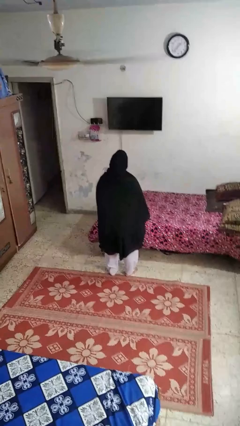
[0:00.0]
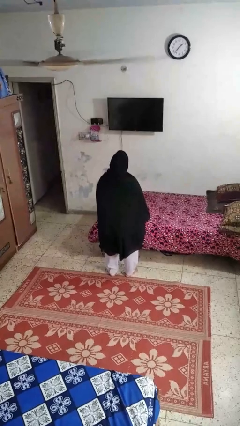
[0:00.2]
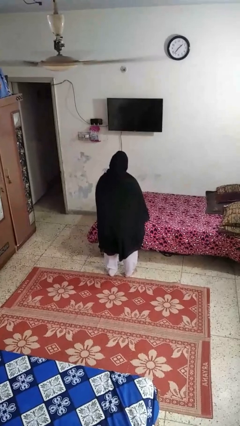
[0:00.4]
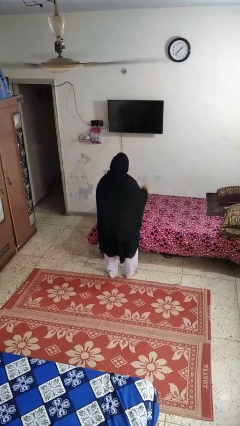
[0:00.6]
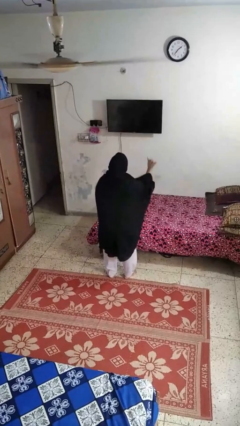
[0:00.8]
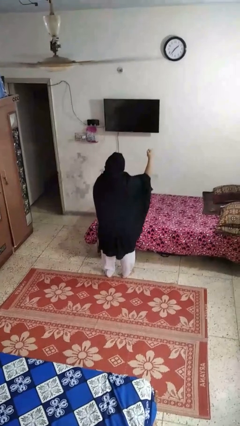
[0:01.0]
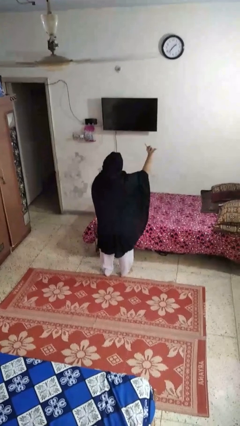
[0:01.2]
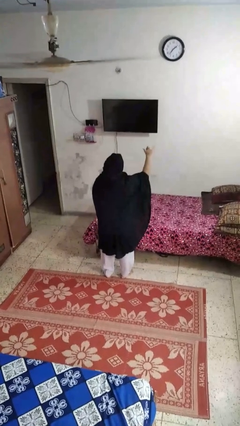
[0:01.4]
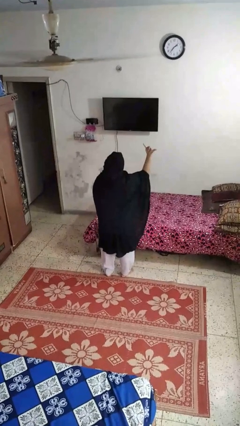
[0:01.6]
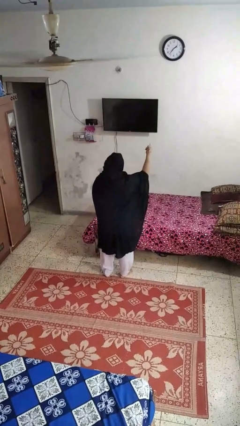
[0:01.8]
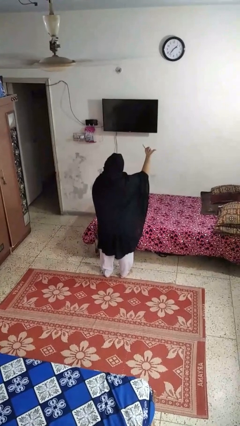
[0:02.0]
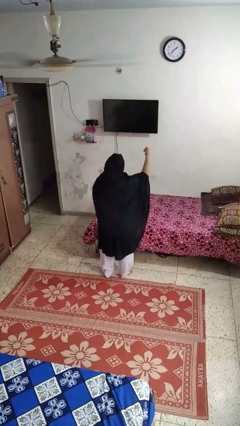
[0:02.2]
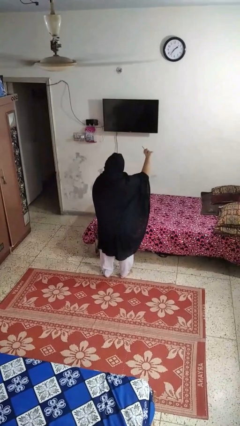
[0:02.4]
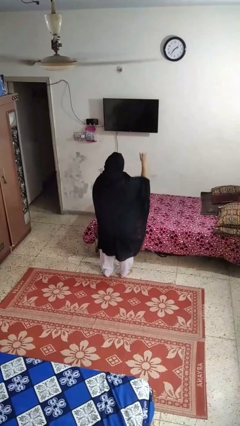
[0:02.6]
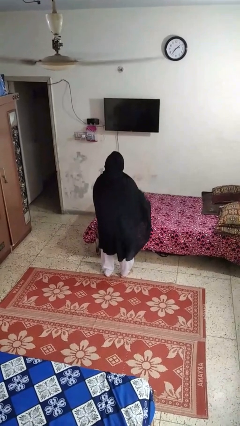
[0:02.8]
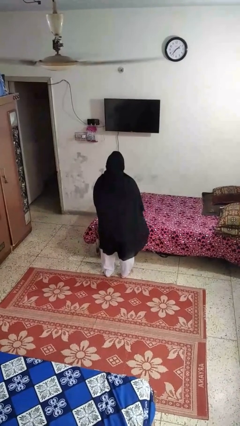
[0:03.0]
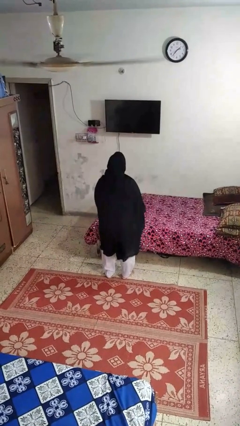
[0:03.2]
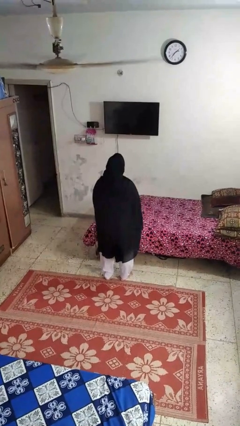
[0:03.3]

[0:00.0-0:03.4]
person gestures hang loose

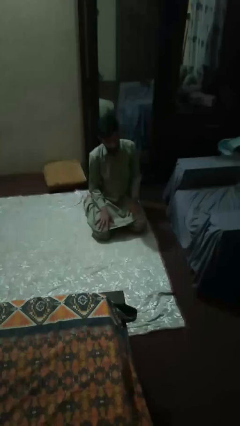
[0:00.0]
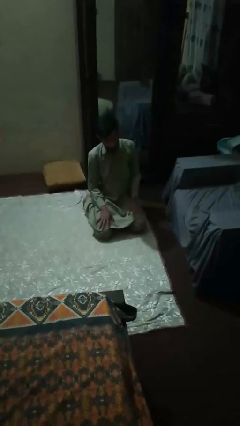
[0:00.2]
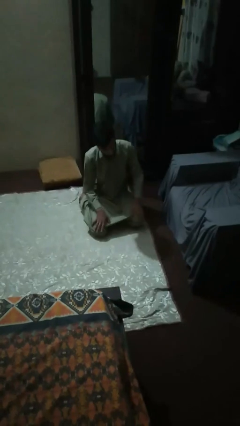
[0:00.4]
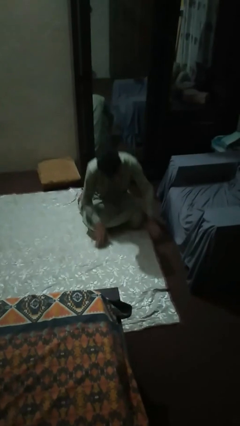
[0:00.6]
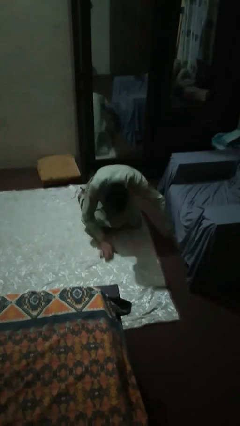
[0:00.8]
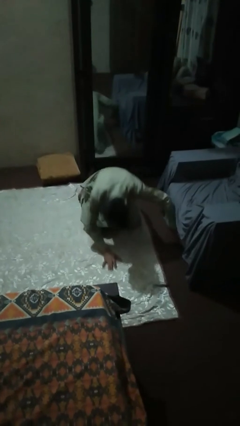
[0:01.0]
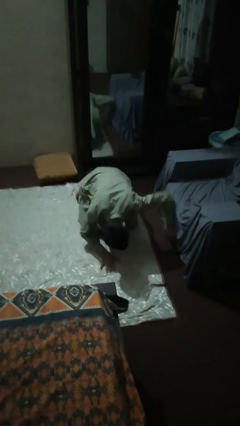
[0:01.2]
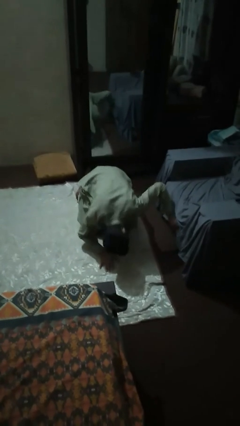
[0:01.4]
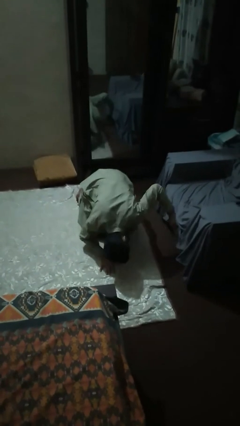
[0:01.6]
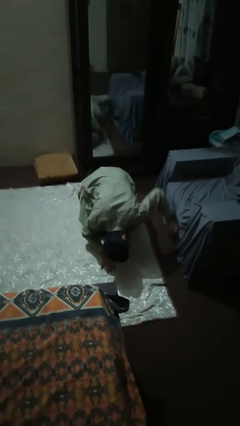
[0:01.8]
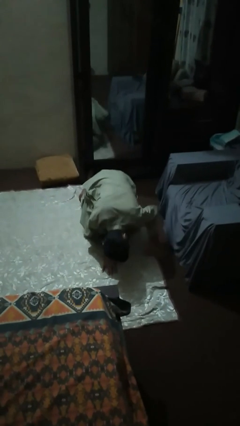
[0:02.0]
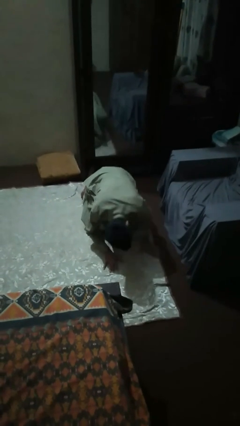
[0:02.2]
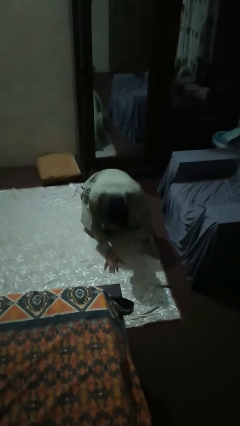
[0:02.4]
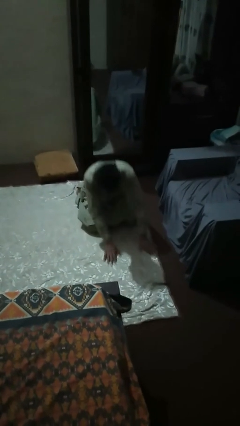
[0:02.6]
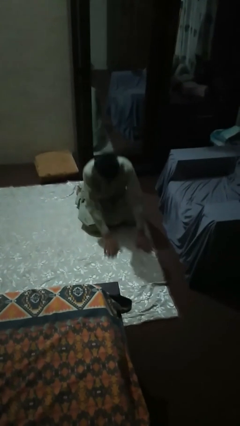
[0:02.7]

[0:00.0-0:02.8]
person searches under couch

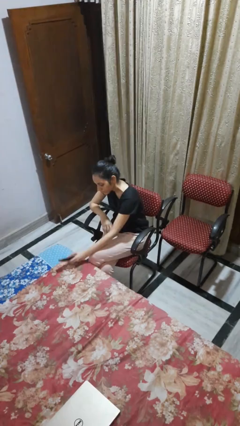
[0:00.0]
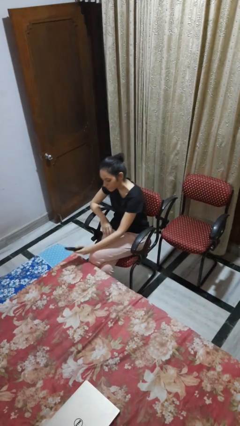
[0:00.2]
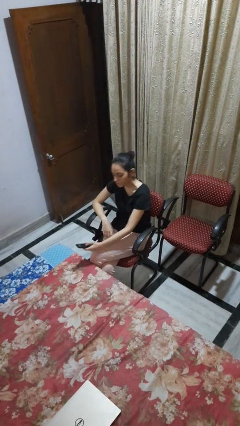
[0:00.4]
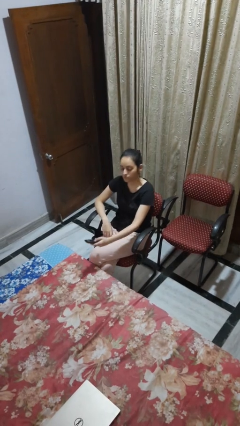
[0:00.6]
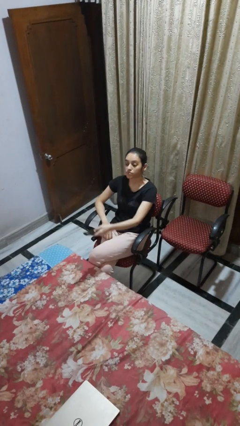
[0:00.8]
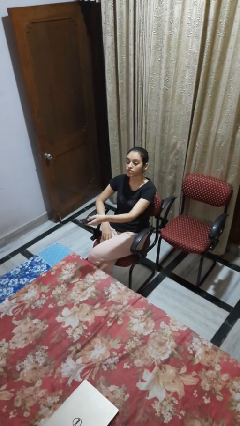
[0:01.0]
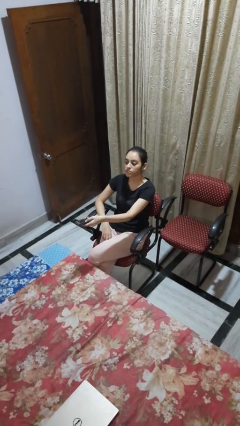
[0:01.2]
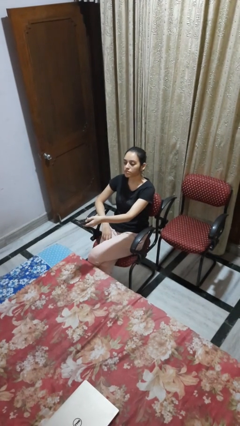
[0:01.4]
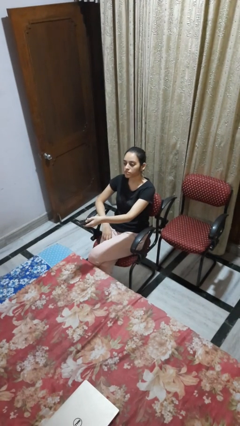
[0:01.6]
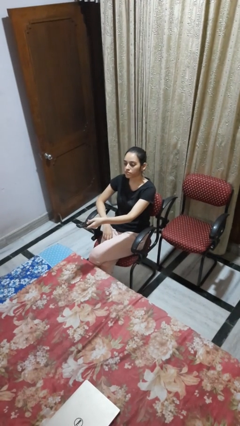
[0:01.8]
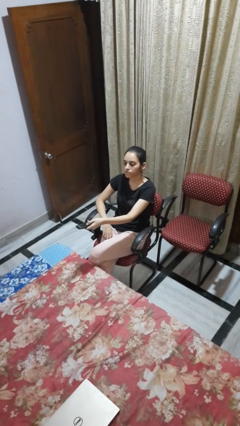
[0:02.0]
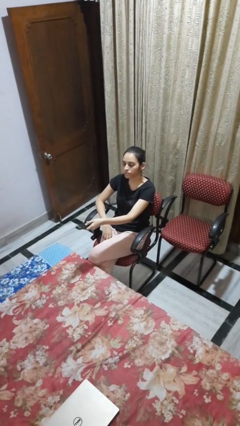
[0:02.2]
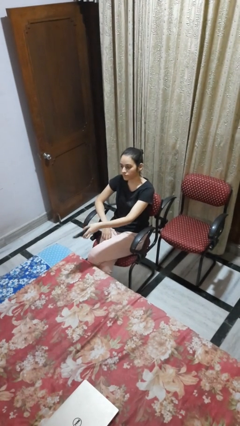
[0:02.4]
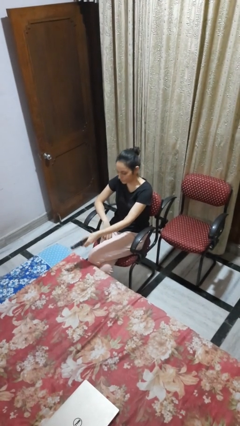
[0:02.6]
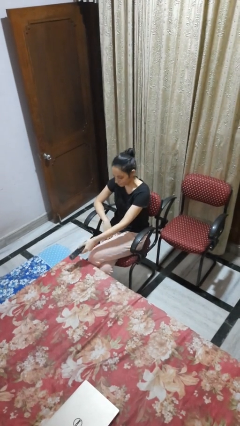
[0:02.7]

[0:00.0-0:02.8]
person uses television remote

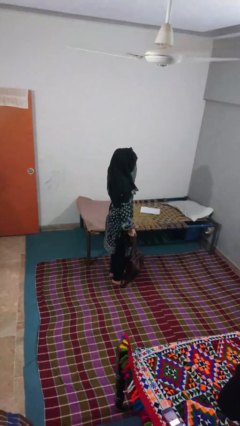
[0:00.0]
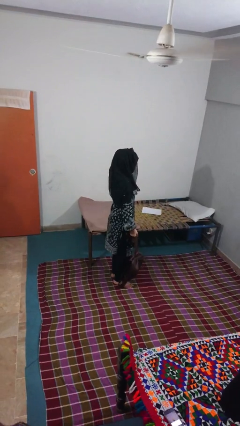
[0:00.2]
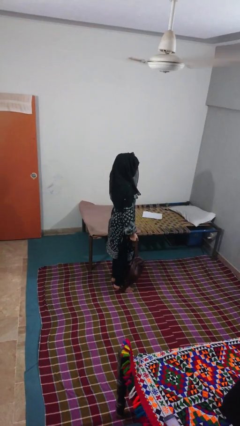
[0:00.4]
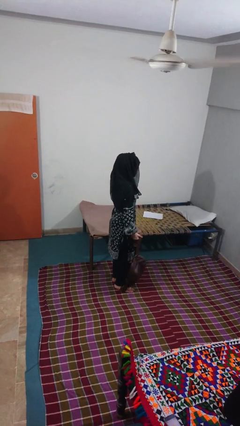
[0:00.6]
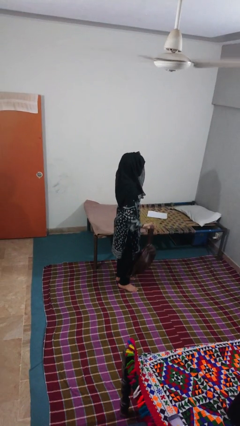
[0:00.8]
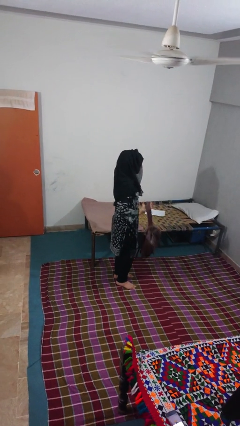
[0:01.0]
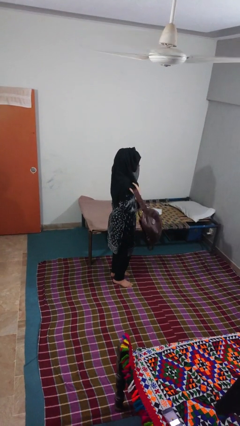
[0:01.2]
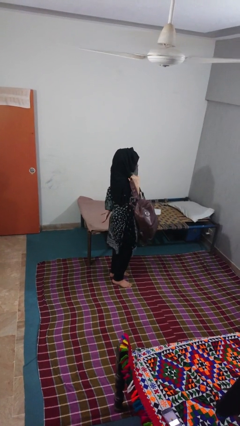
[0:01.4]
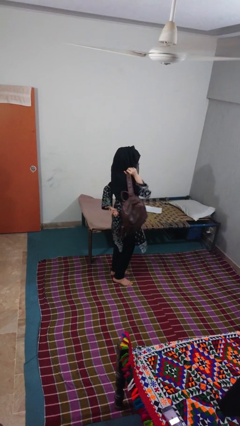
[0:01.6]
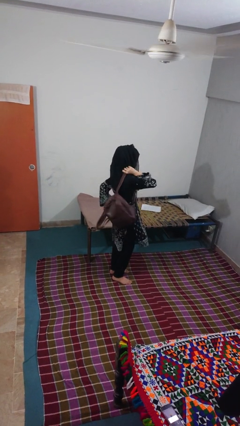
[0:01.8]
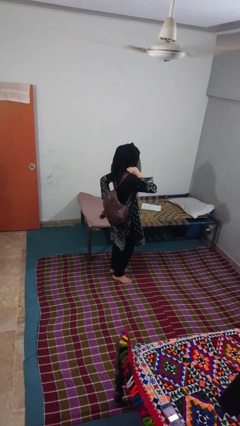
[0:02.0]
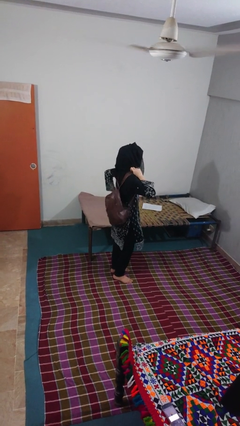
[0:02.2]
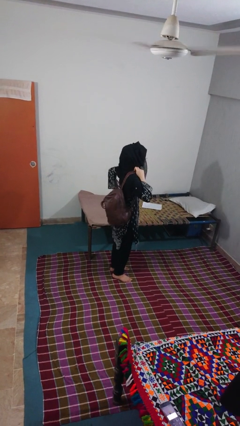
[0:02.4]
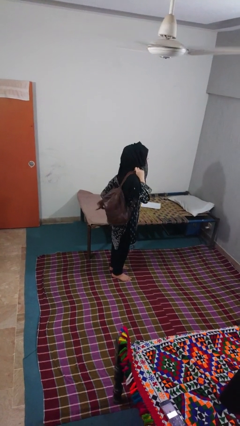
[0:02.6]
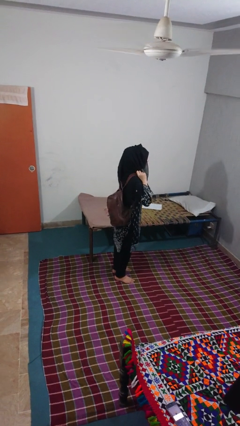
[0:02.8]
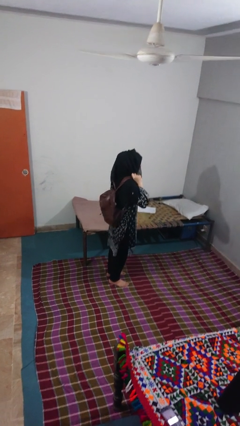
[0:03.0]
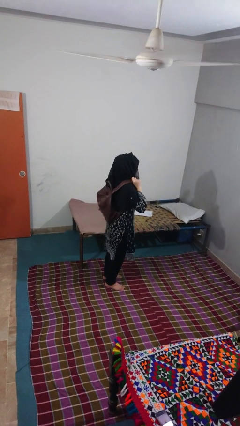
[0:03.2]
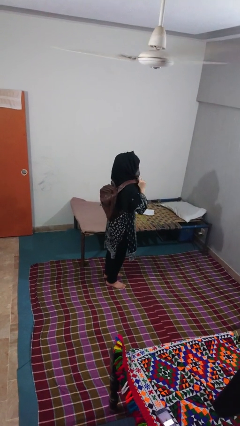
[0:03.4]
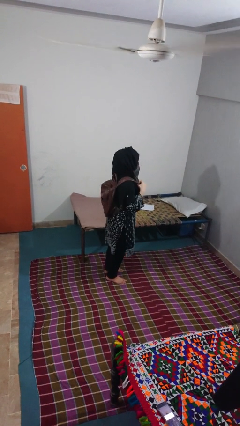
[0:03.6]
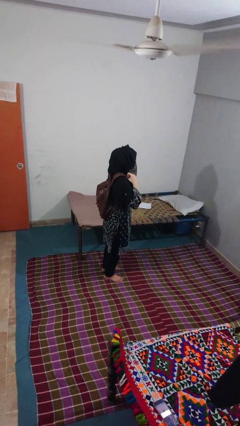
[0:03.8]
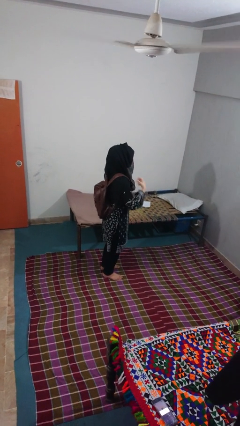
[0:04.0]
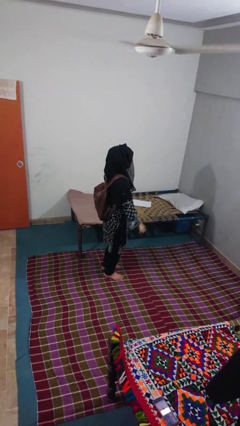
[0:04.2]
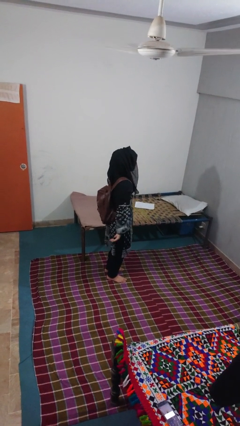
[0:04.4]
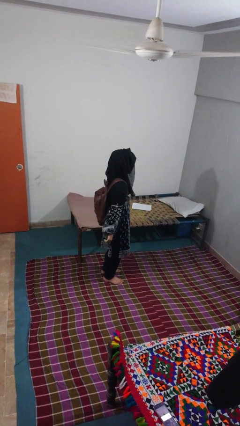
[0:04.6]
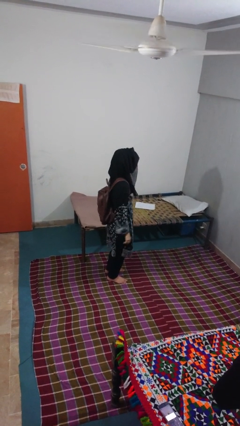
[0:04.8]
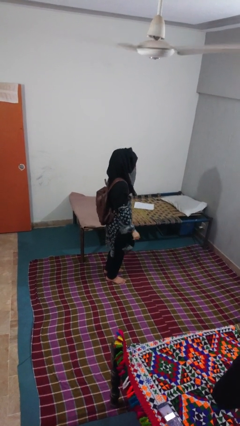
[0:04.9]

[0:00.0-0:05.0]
person puts on backpack

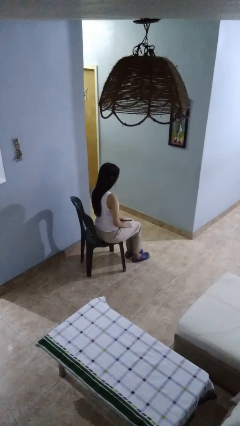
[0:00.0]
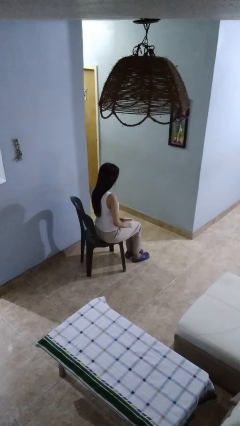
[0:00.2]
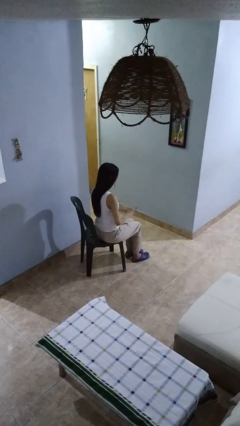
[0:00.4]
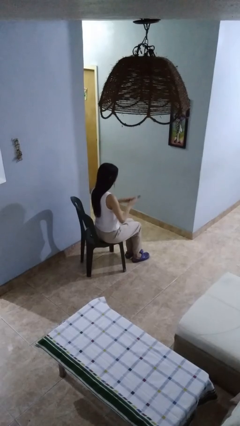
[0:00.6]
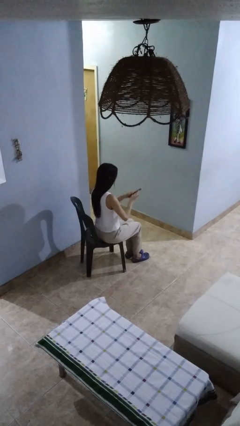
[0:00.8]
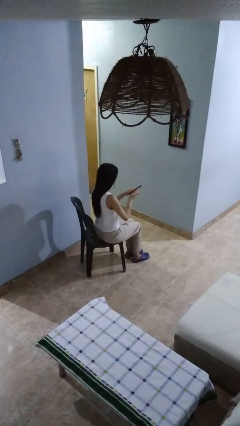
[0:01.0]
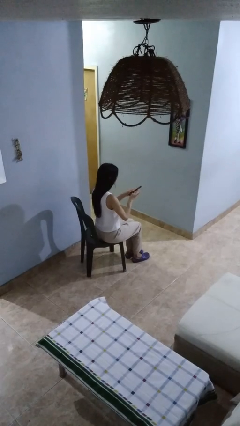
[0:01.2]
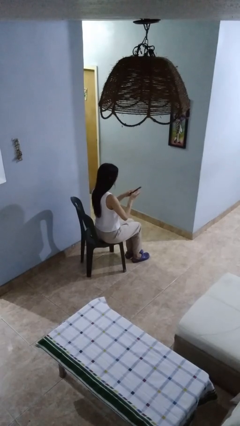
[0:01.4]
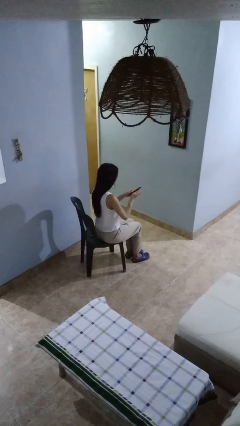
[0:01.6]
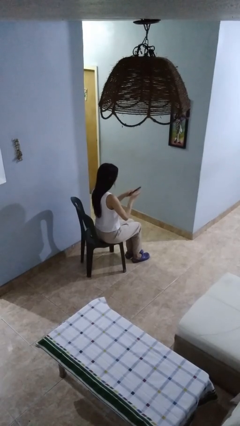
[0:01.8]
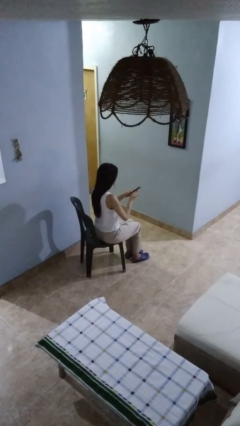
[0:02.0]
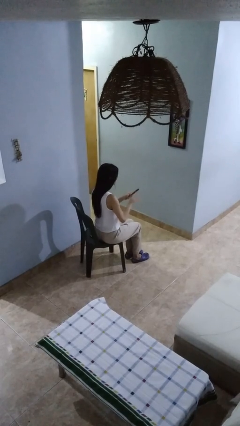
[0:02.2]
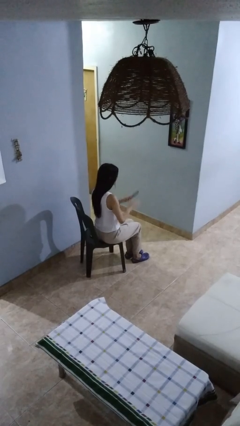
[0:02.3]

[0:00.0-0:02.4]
person files fingernails

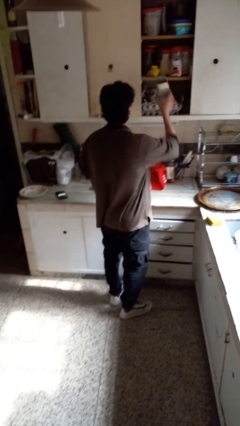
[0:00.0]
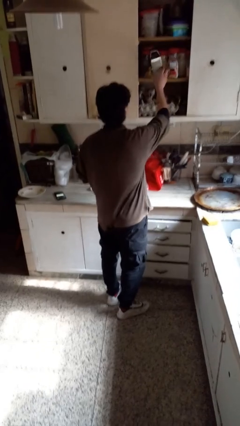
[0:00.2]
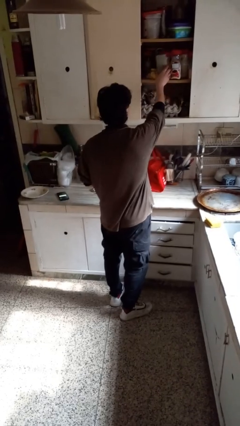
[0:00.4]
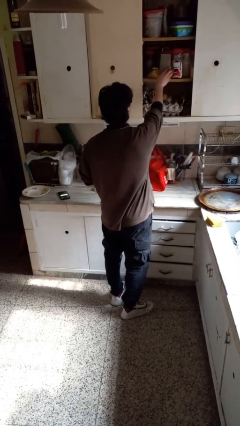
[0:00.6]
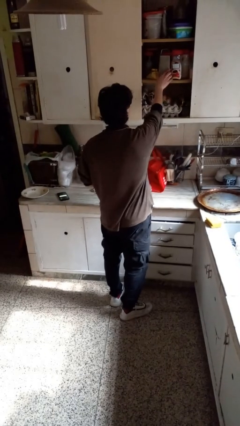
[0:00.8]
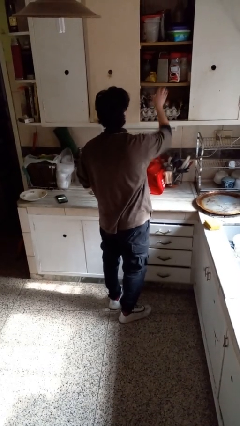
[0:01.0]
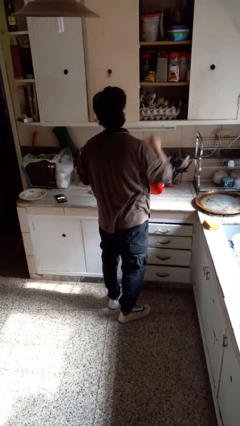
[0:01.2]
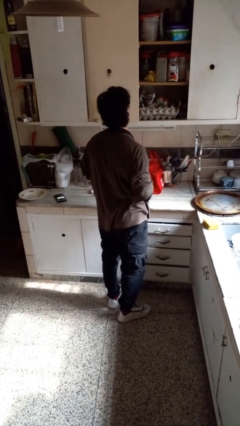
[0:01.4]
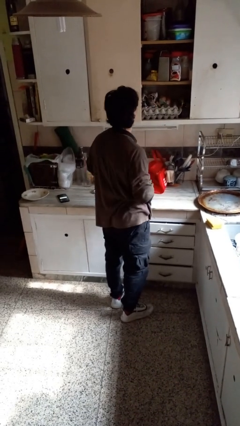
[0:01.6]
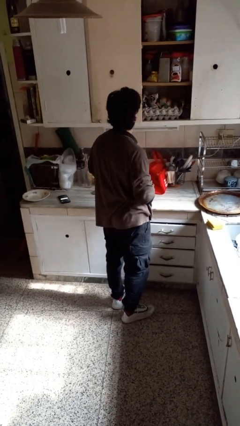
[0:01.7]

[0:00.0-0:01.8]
person picks up object from cabinet
